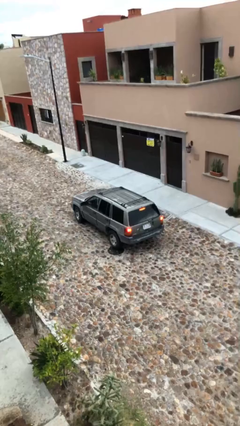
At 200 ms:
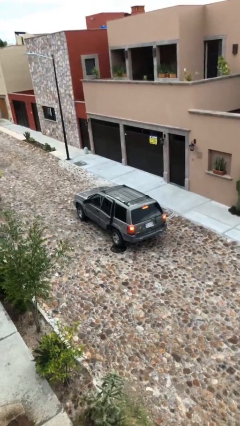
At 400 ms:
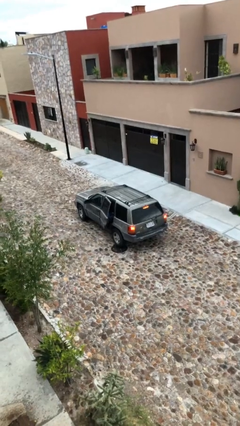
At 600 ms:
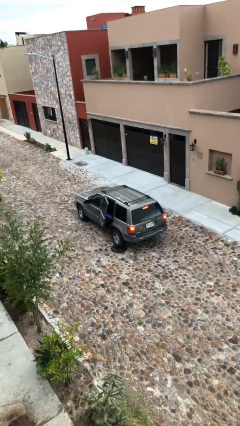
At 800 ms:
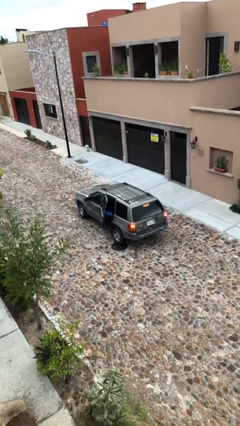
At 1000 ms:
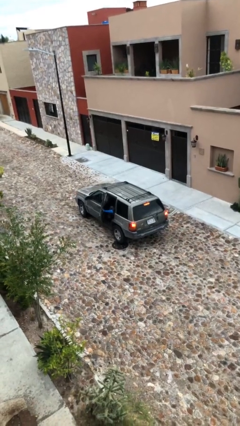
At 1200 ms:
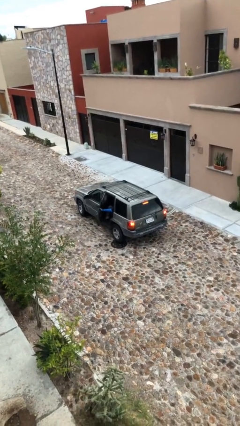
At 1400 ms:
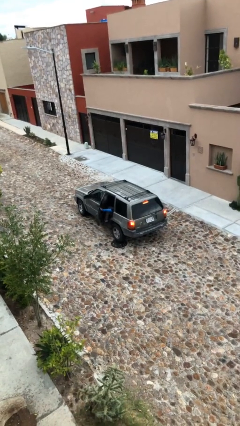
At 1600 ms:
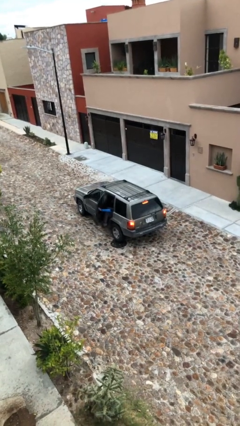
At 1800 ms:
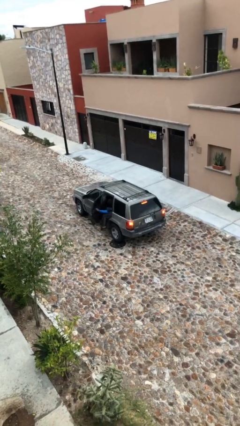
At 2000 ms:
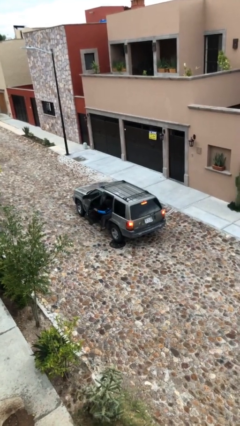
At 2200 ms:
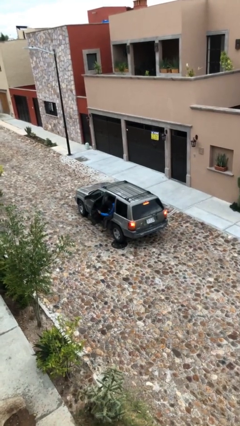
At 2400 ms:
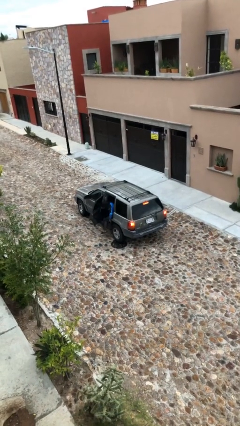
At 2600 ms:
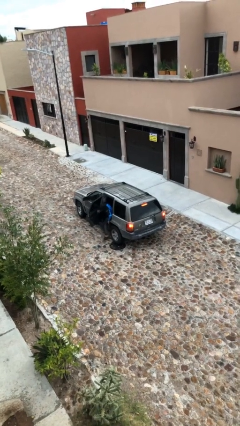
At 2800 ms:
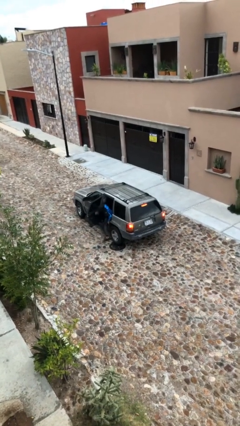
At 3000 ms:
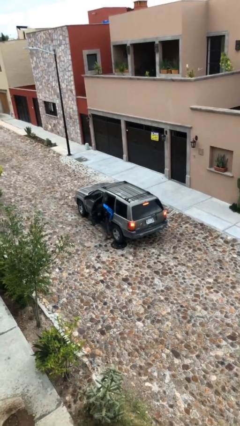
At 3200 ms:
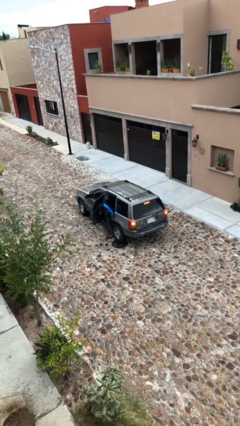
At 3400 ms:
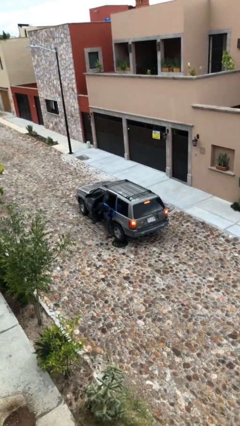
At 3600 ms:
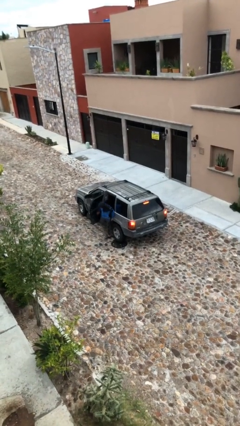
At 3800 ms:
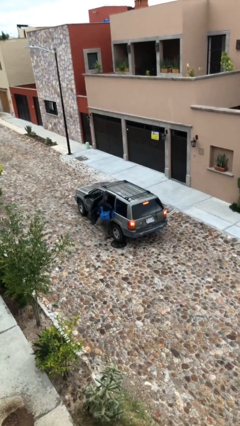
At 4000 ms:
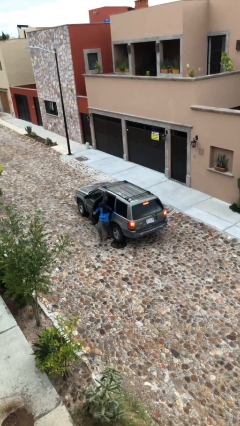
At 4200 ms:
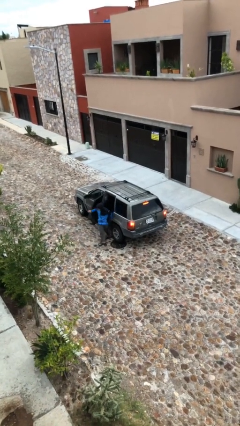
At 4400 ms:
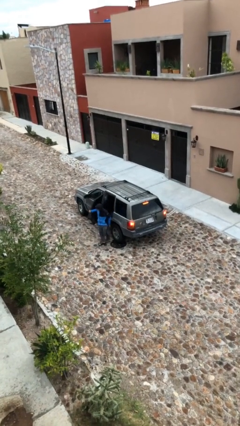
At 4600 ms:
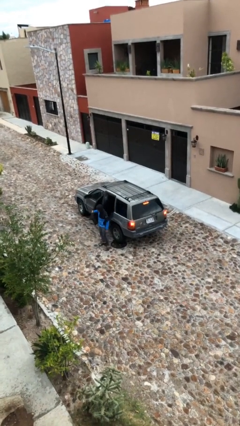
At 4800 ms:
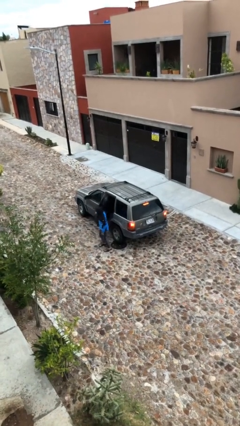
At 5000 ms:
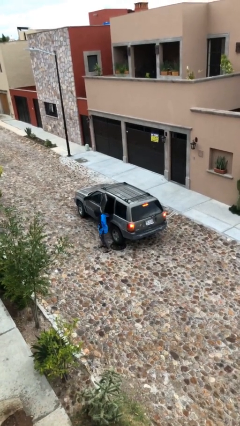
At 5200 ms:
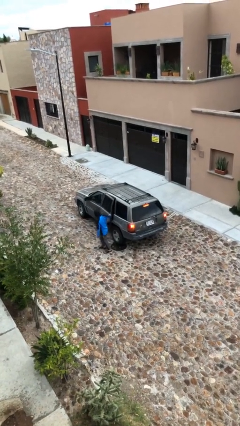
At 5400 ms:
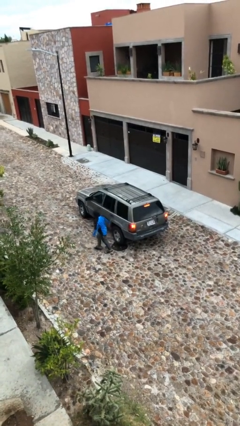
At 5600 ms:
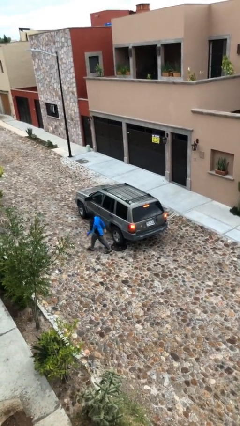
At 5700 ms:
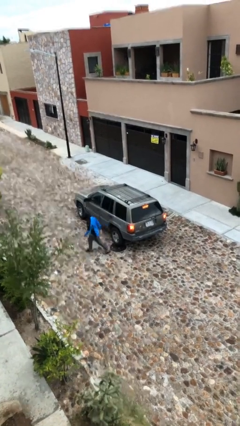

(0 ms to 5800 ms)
car drops off person

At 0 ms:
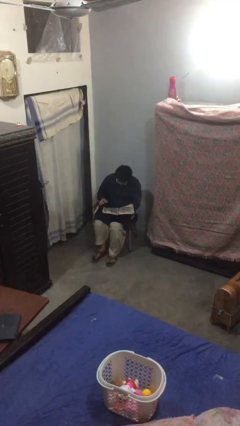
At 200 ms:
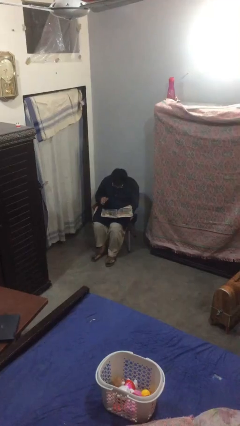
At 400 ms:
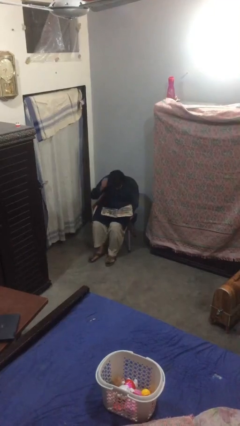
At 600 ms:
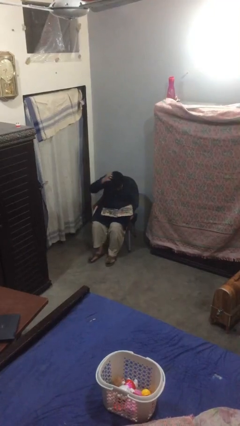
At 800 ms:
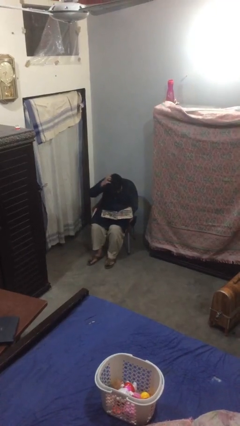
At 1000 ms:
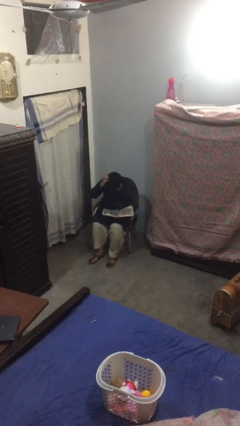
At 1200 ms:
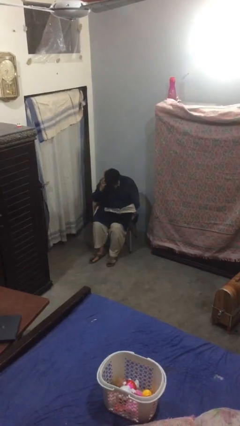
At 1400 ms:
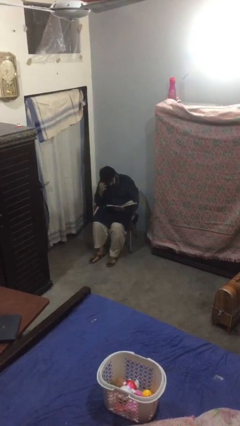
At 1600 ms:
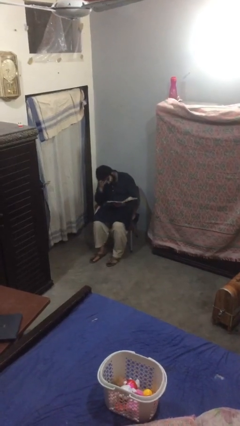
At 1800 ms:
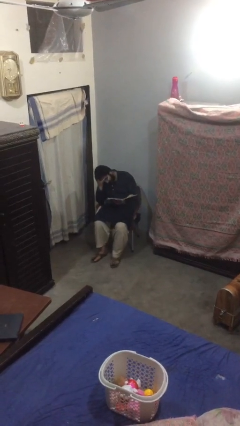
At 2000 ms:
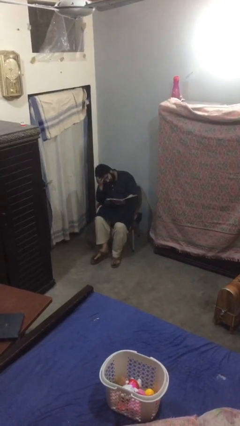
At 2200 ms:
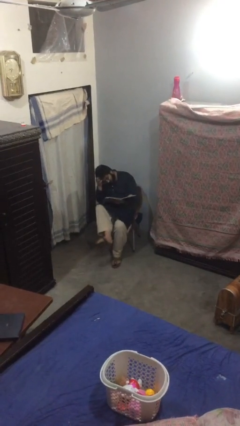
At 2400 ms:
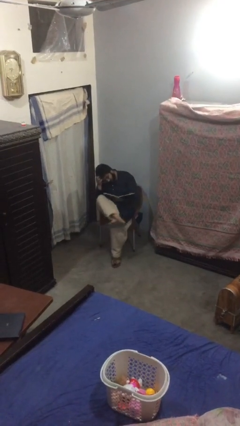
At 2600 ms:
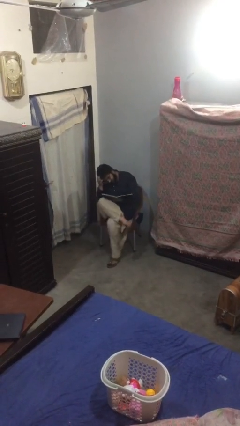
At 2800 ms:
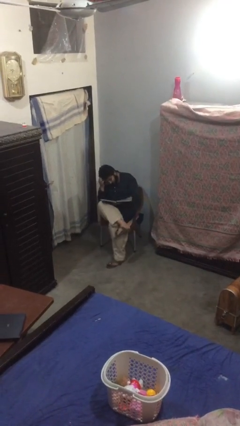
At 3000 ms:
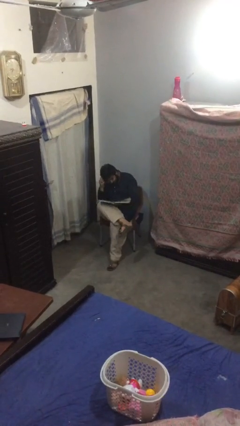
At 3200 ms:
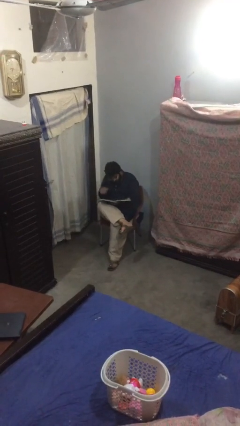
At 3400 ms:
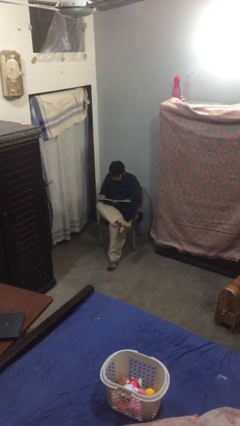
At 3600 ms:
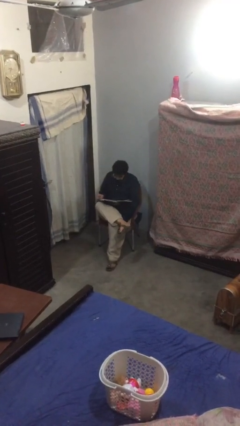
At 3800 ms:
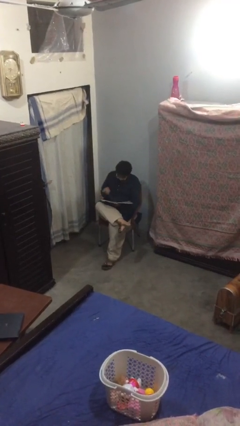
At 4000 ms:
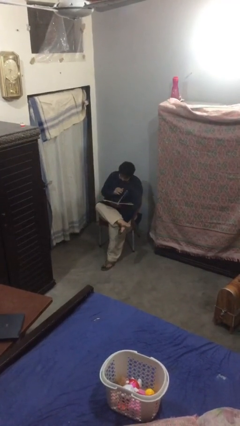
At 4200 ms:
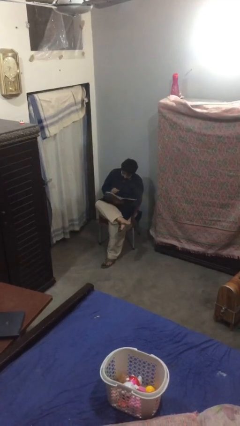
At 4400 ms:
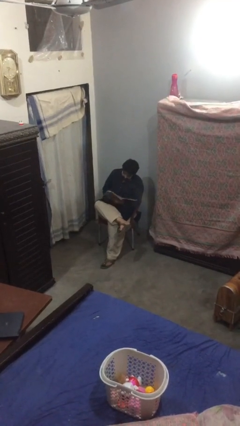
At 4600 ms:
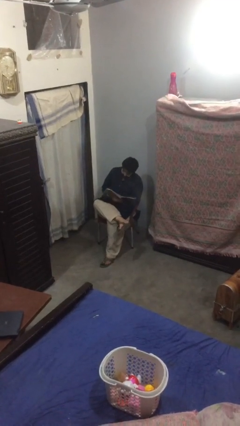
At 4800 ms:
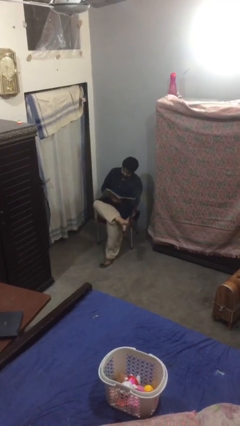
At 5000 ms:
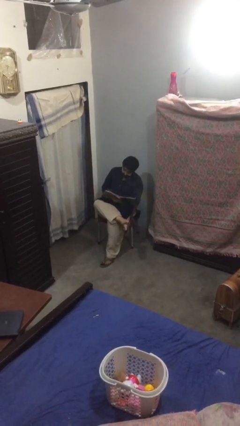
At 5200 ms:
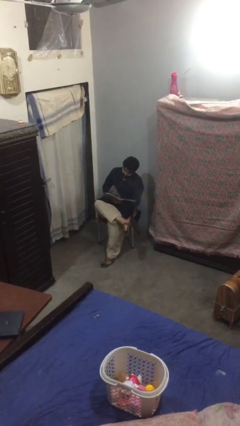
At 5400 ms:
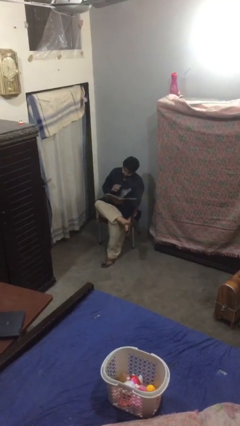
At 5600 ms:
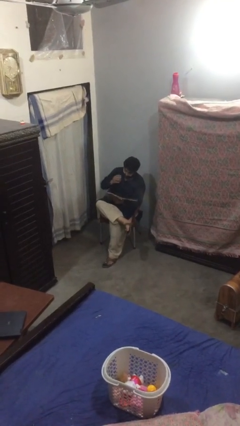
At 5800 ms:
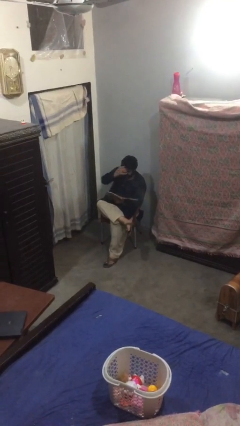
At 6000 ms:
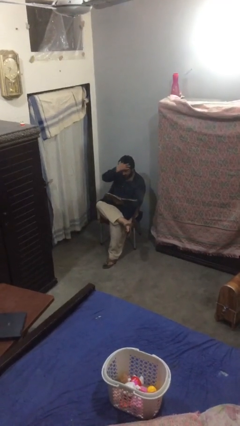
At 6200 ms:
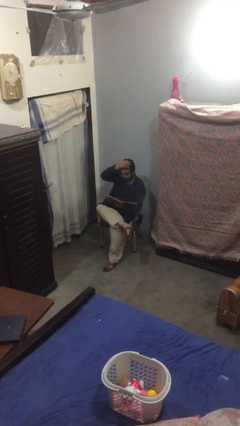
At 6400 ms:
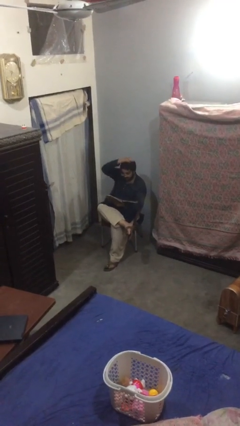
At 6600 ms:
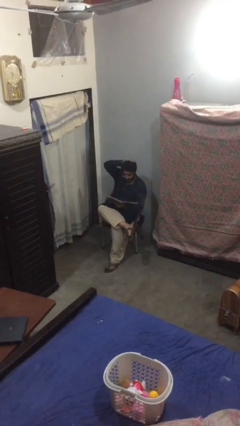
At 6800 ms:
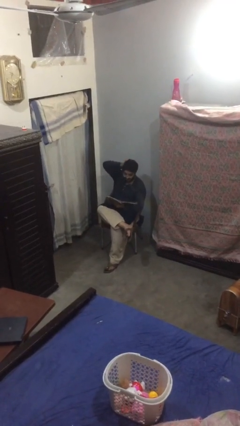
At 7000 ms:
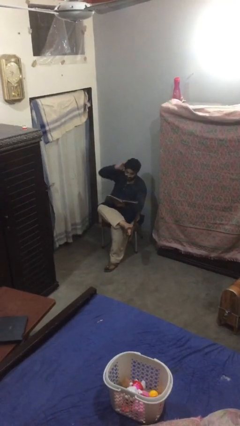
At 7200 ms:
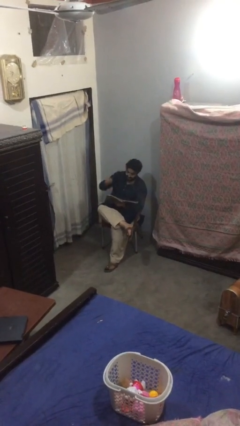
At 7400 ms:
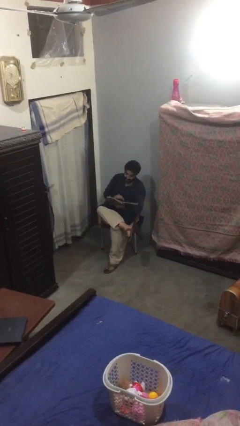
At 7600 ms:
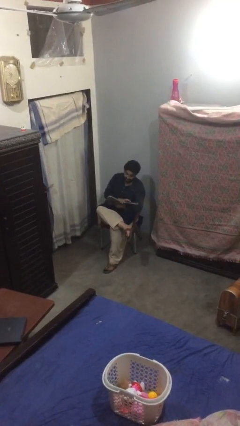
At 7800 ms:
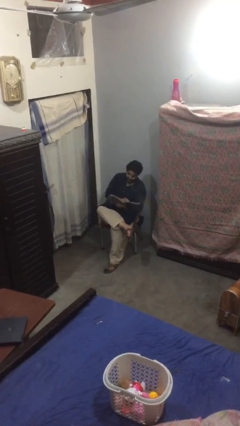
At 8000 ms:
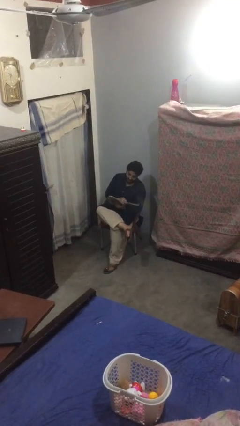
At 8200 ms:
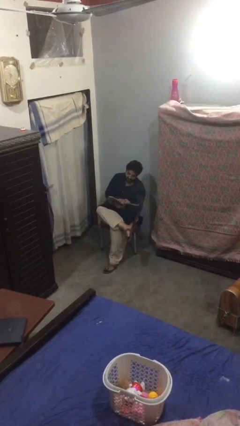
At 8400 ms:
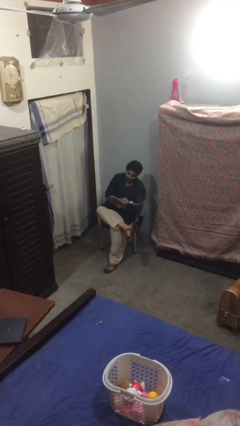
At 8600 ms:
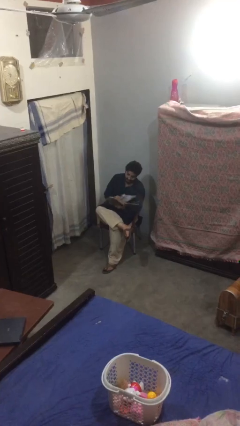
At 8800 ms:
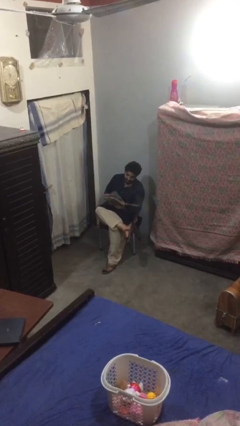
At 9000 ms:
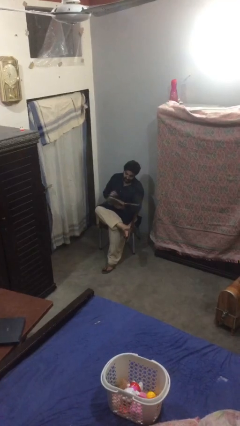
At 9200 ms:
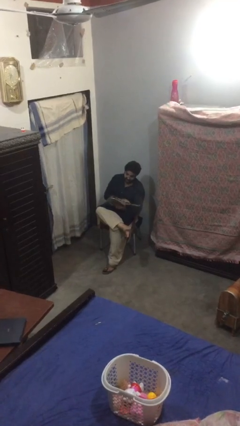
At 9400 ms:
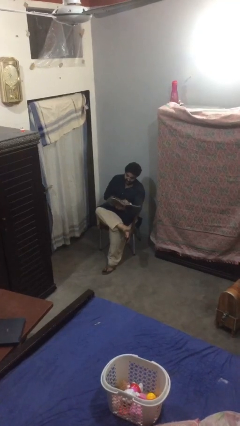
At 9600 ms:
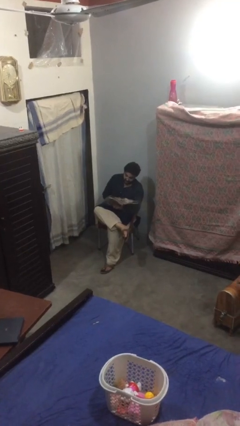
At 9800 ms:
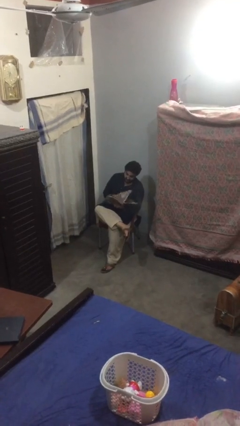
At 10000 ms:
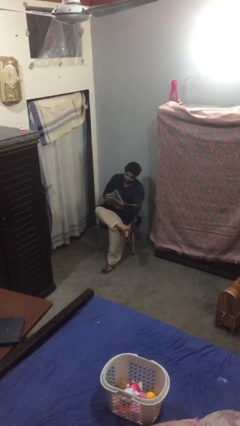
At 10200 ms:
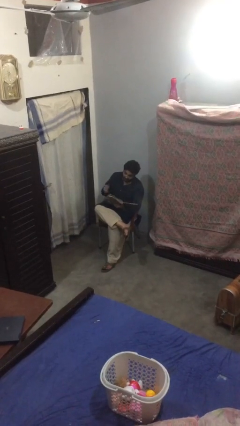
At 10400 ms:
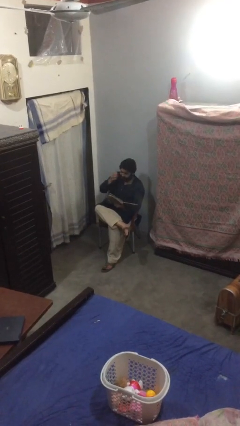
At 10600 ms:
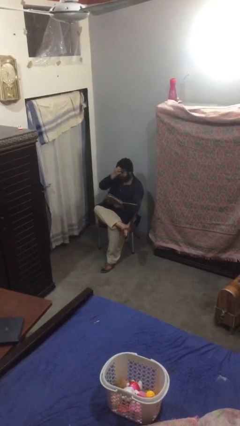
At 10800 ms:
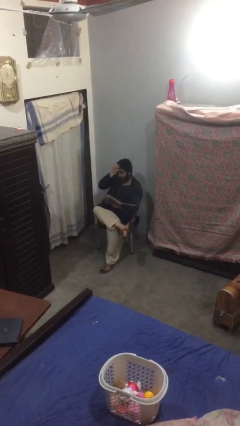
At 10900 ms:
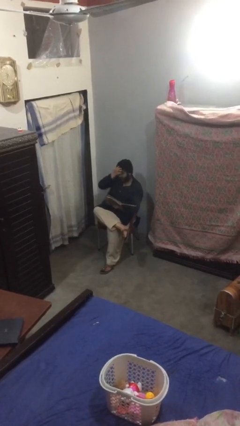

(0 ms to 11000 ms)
person reads document

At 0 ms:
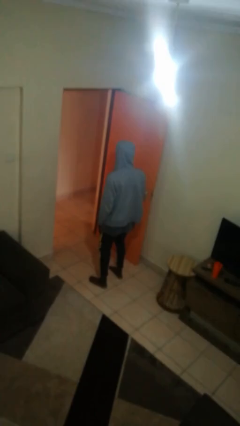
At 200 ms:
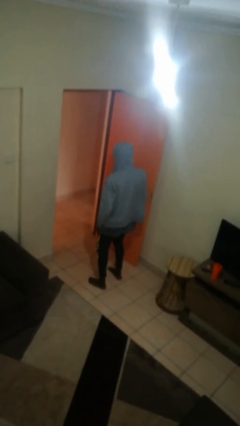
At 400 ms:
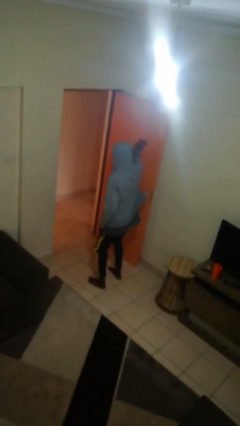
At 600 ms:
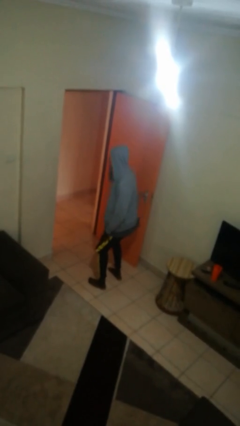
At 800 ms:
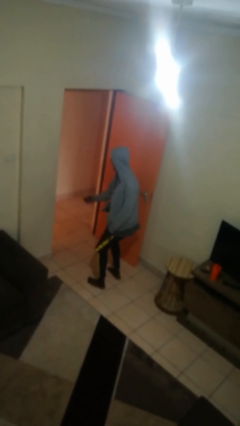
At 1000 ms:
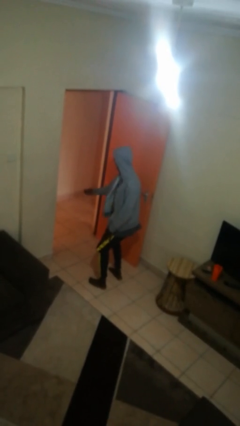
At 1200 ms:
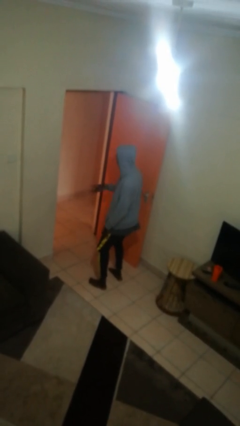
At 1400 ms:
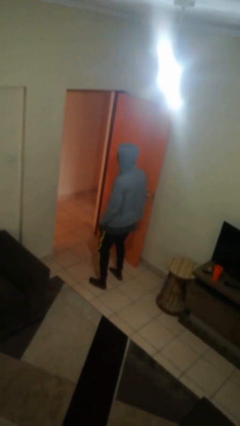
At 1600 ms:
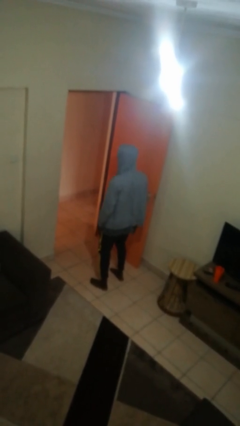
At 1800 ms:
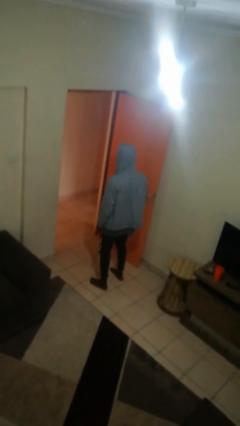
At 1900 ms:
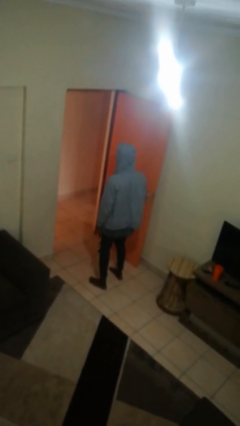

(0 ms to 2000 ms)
person karate chop
